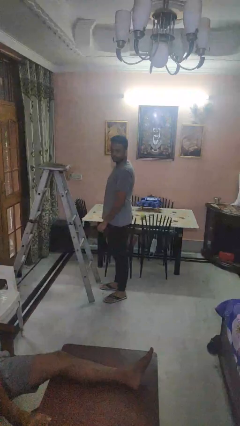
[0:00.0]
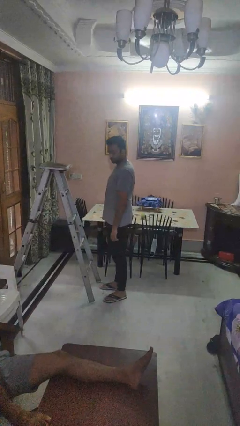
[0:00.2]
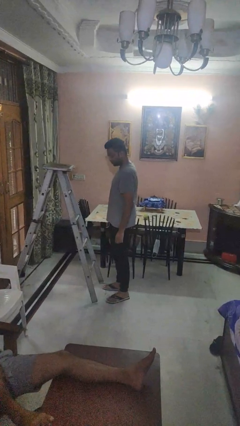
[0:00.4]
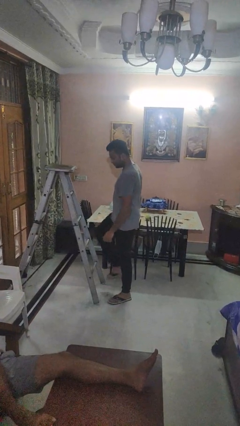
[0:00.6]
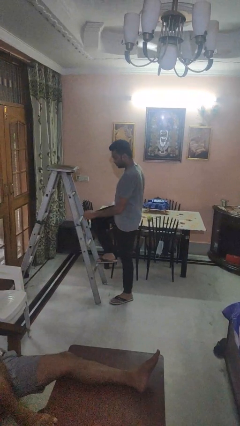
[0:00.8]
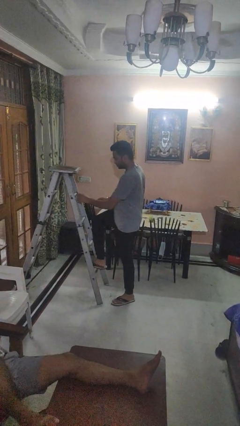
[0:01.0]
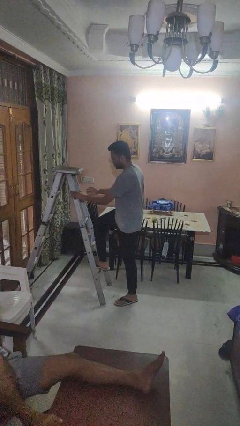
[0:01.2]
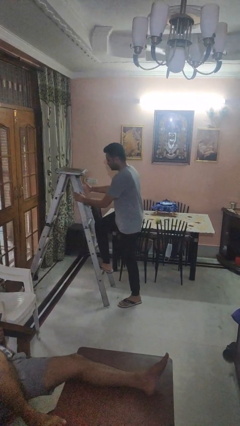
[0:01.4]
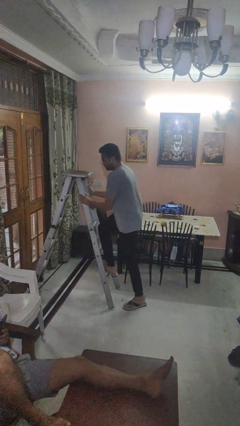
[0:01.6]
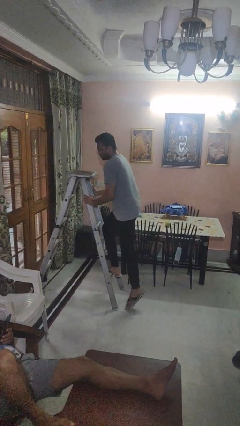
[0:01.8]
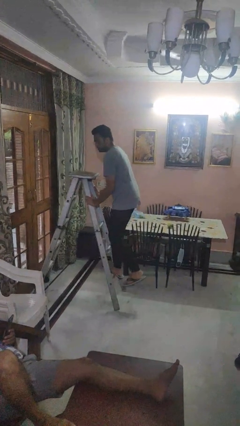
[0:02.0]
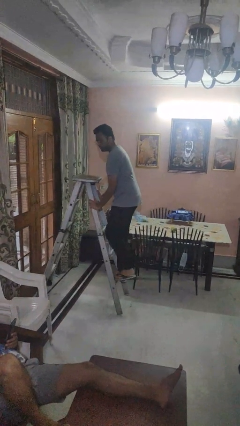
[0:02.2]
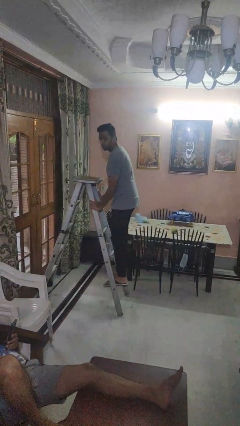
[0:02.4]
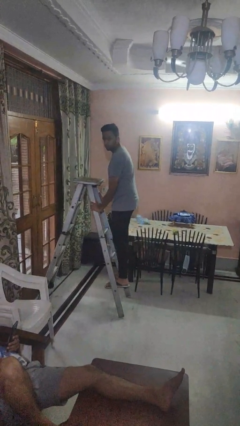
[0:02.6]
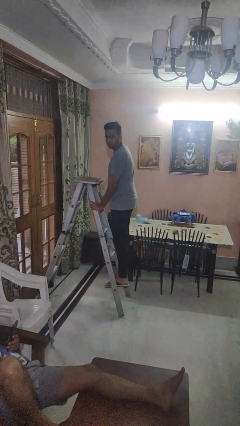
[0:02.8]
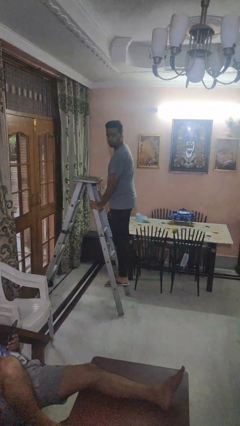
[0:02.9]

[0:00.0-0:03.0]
person climbs up ladder

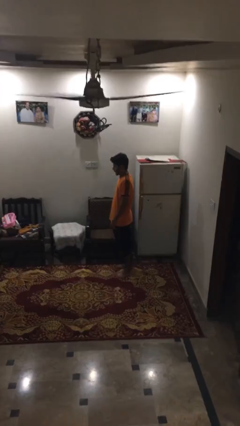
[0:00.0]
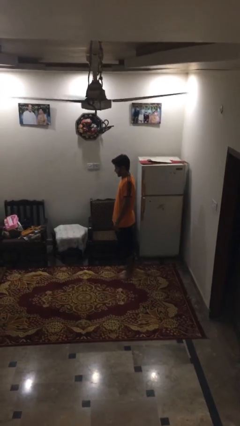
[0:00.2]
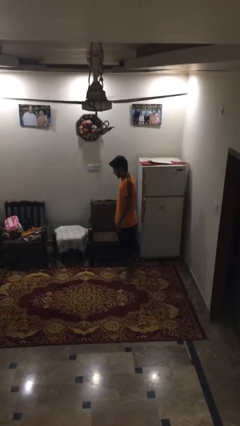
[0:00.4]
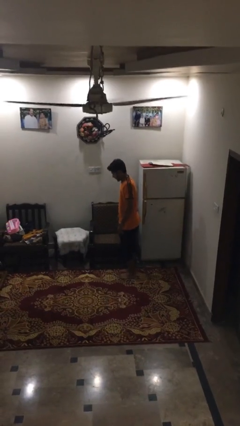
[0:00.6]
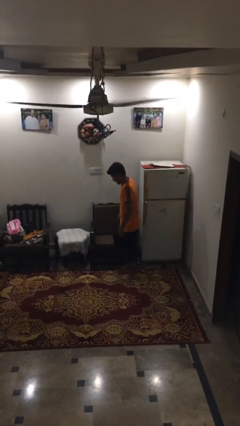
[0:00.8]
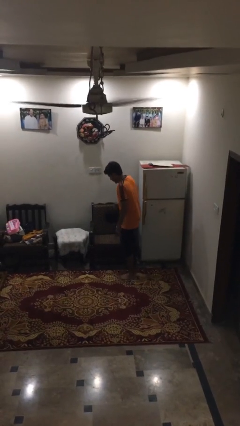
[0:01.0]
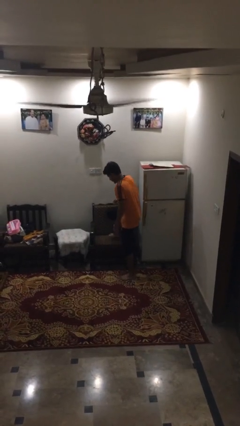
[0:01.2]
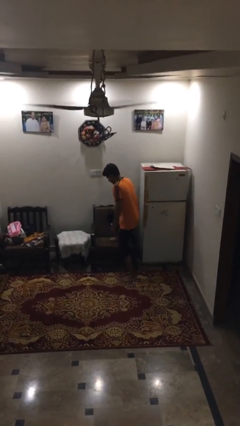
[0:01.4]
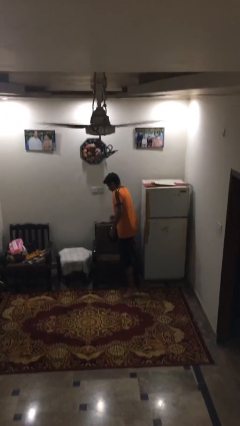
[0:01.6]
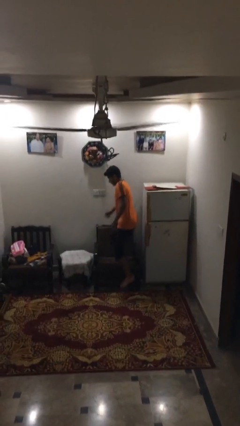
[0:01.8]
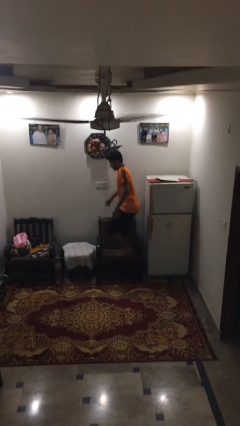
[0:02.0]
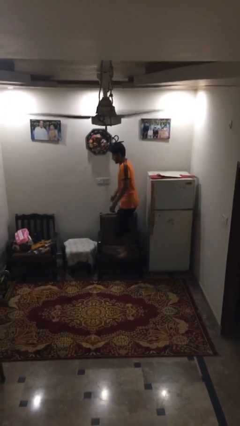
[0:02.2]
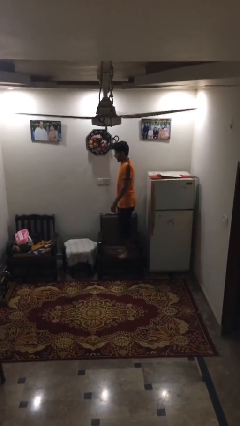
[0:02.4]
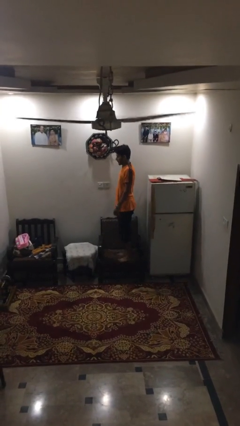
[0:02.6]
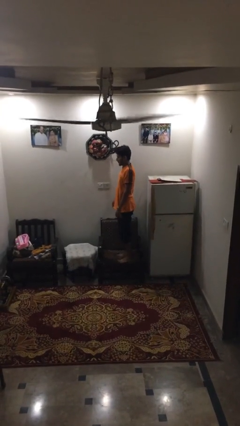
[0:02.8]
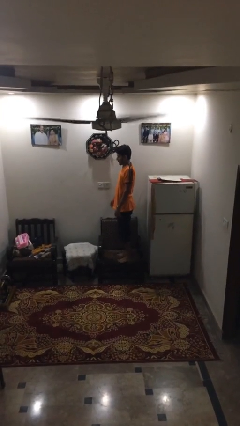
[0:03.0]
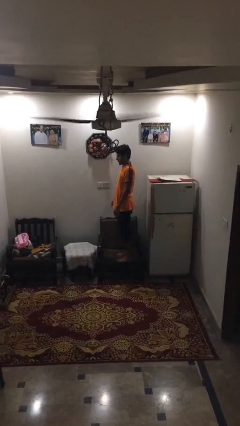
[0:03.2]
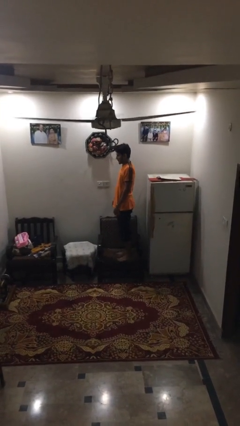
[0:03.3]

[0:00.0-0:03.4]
person climbs on couch

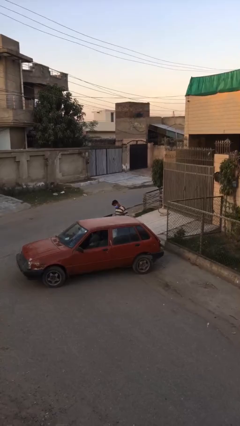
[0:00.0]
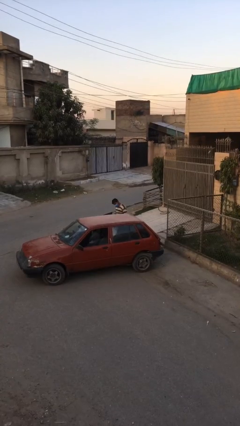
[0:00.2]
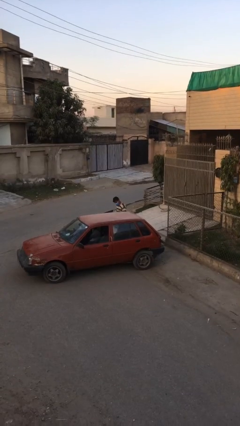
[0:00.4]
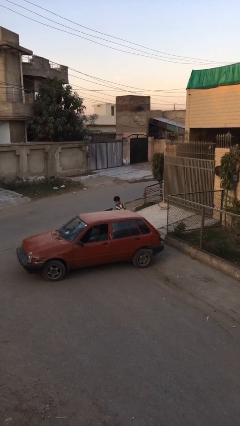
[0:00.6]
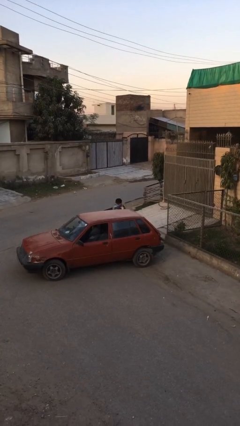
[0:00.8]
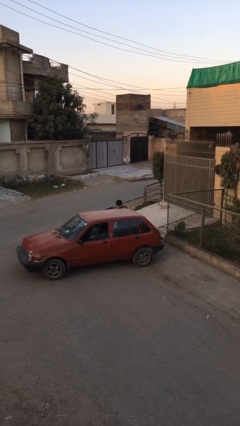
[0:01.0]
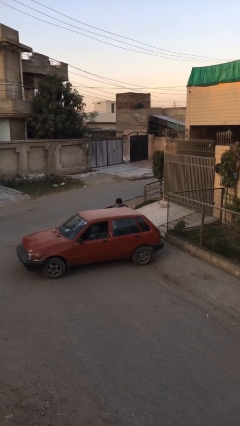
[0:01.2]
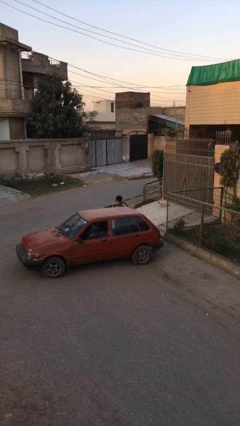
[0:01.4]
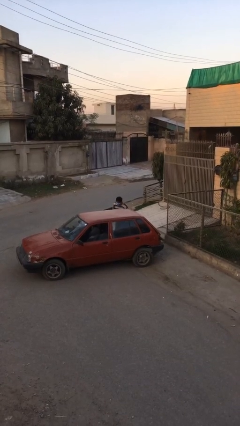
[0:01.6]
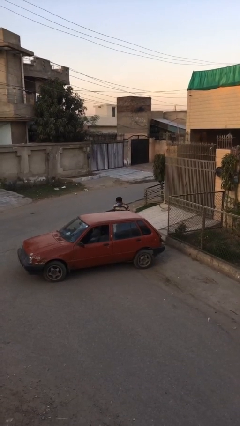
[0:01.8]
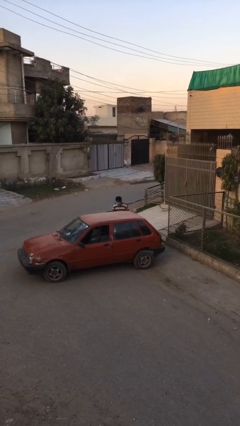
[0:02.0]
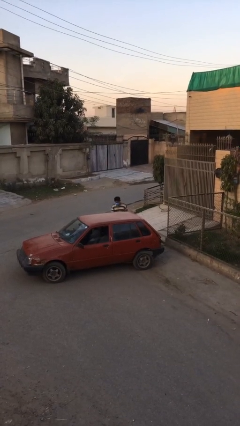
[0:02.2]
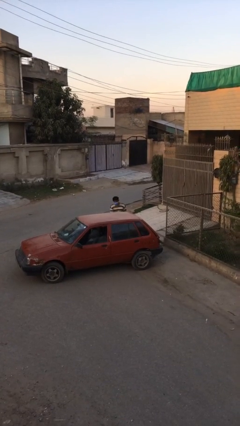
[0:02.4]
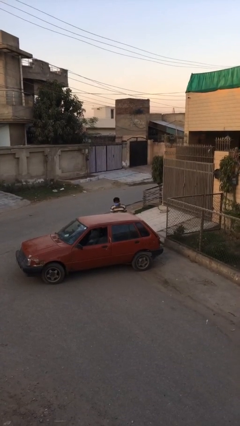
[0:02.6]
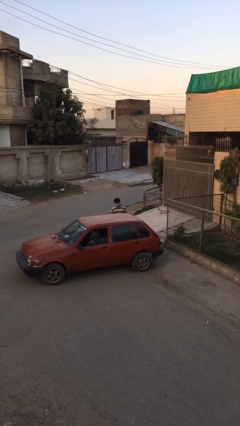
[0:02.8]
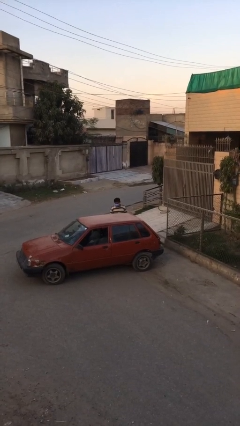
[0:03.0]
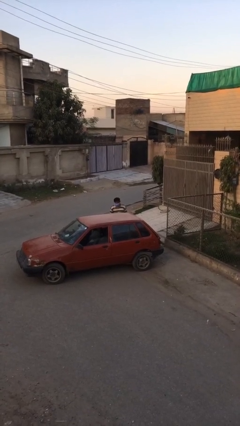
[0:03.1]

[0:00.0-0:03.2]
person loads car

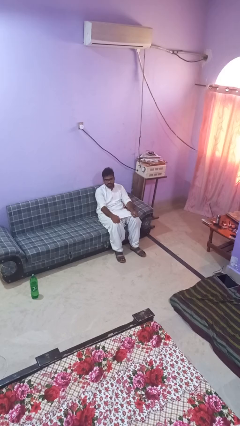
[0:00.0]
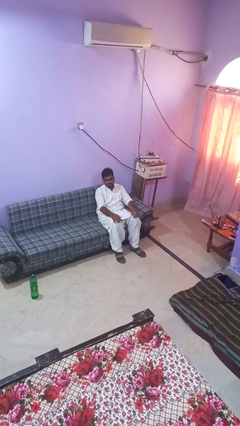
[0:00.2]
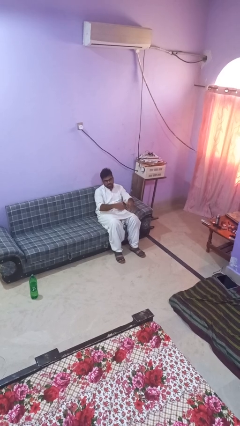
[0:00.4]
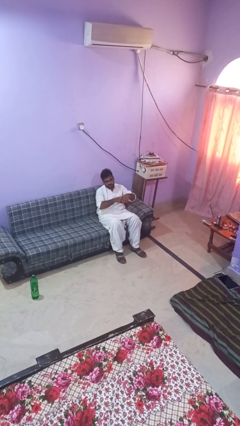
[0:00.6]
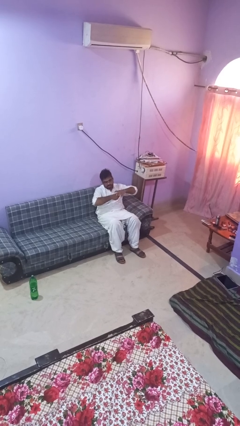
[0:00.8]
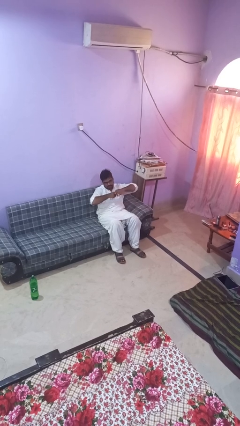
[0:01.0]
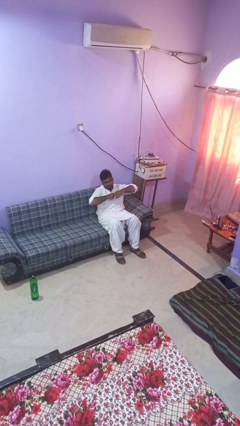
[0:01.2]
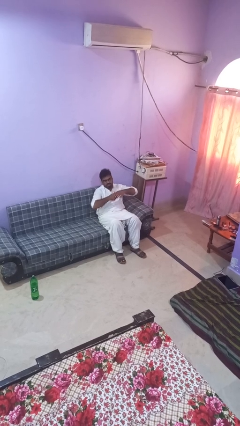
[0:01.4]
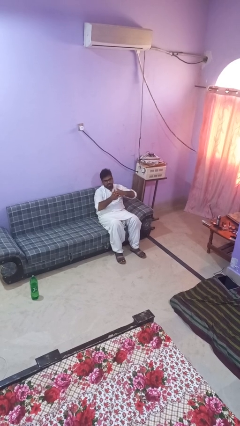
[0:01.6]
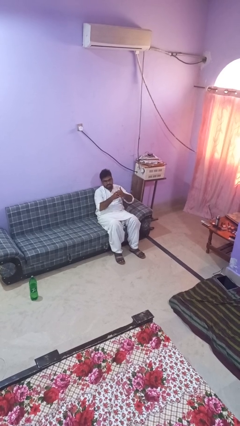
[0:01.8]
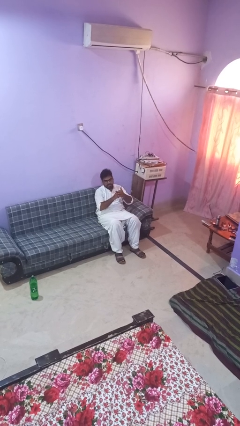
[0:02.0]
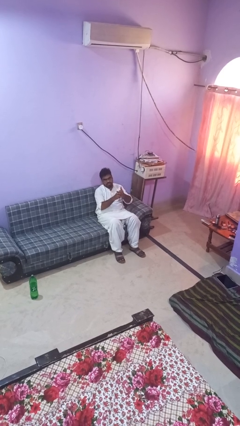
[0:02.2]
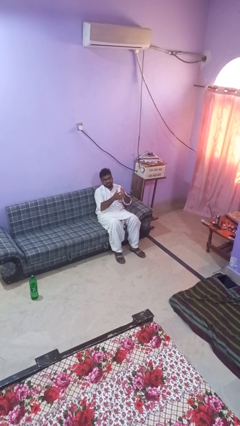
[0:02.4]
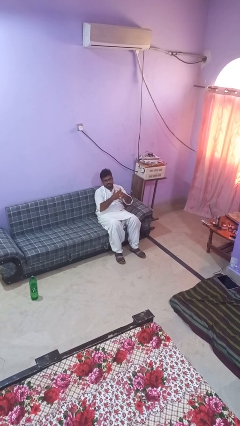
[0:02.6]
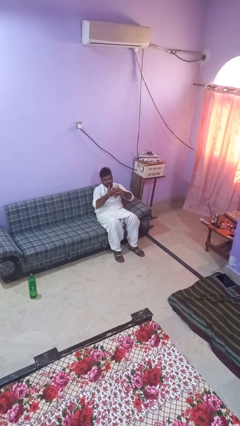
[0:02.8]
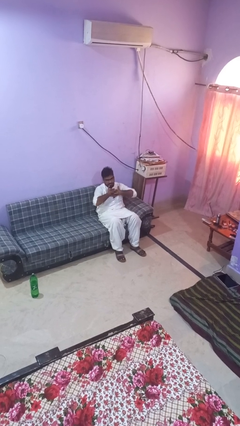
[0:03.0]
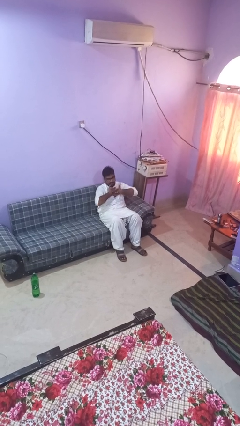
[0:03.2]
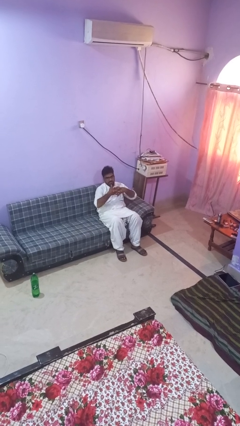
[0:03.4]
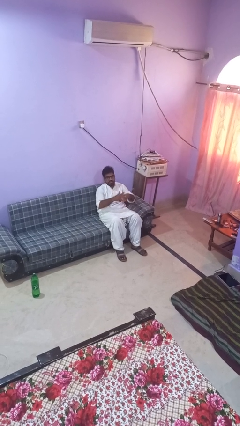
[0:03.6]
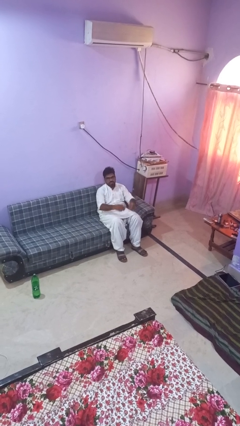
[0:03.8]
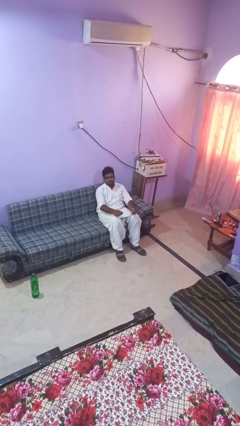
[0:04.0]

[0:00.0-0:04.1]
person cracks knuckles

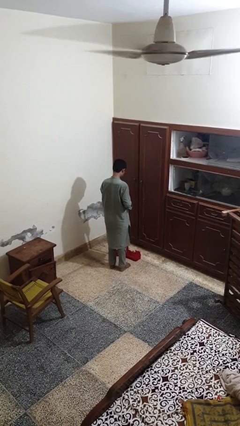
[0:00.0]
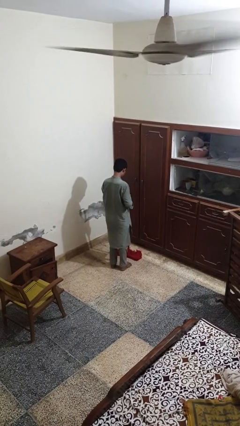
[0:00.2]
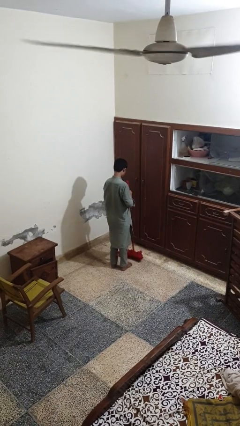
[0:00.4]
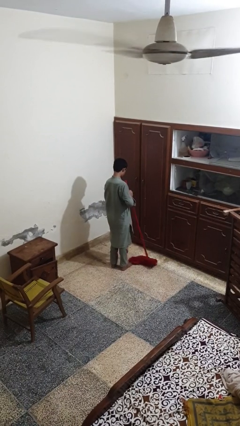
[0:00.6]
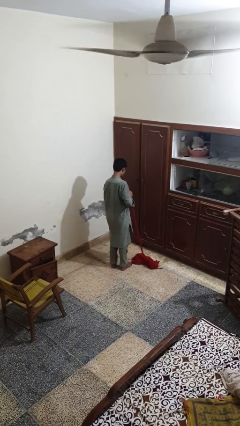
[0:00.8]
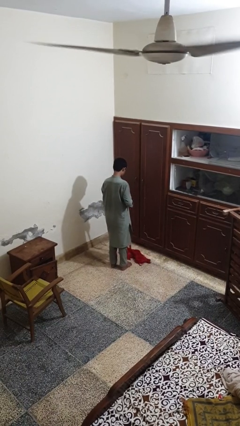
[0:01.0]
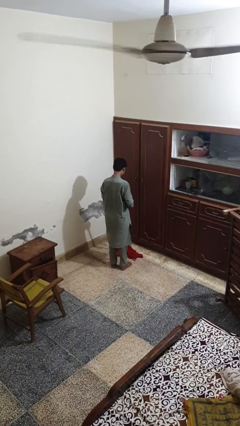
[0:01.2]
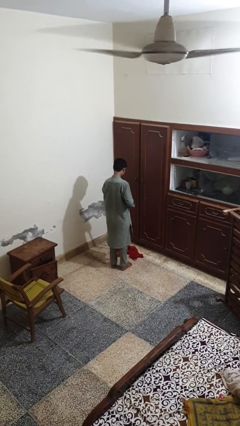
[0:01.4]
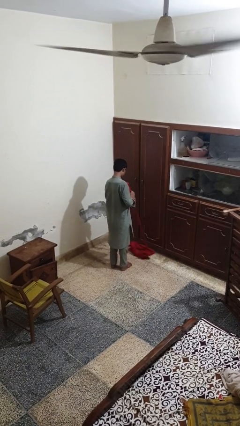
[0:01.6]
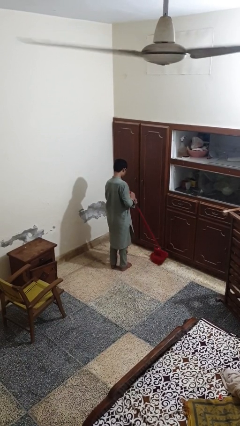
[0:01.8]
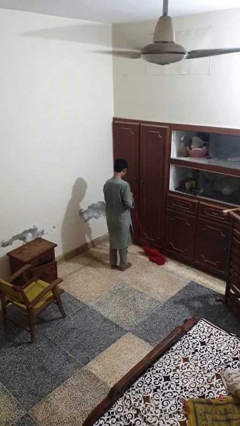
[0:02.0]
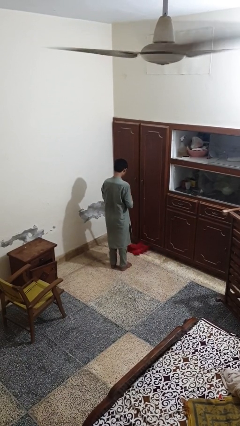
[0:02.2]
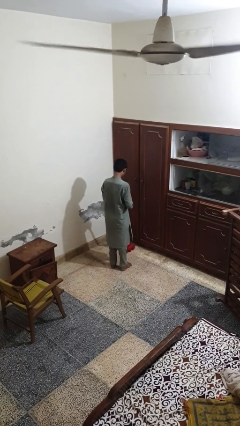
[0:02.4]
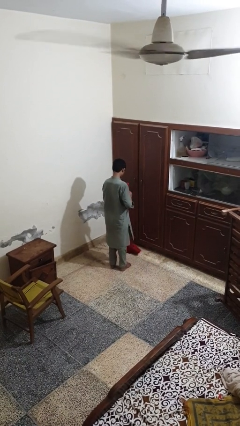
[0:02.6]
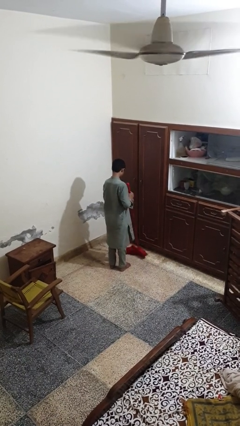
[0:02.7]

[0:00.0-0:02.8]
person mops

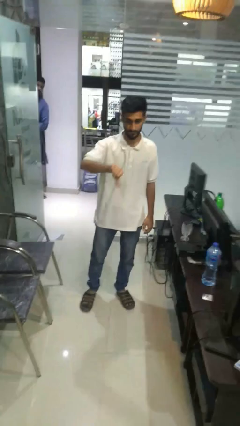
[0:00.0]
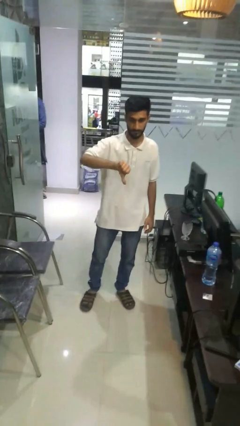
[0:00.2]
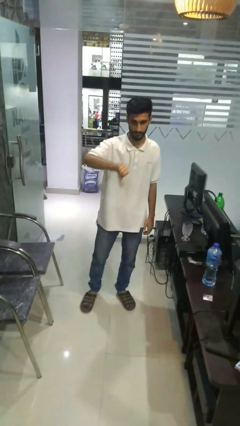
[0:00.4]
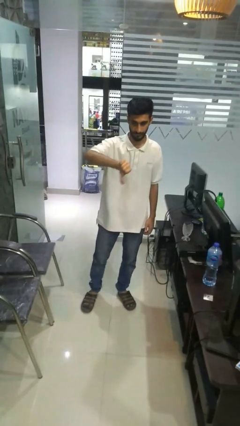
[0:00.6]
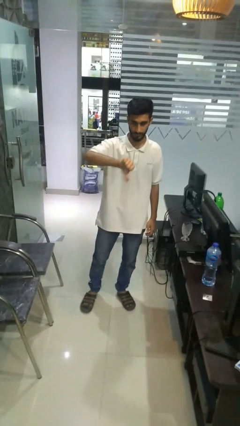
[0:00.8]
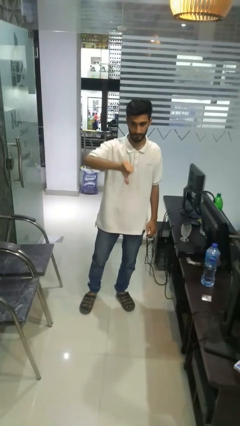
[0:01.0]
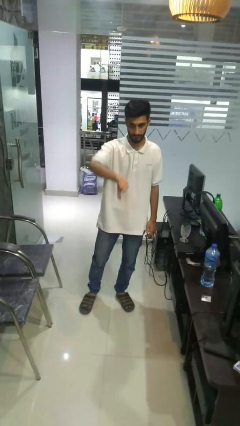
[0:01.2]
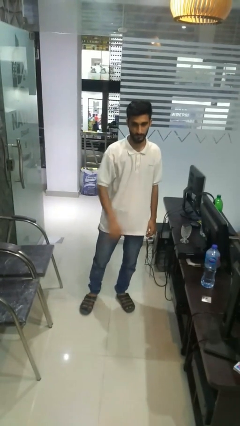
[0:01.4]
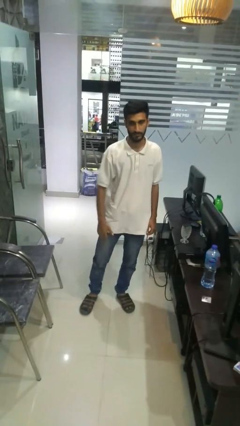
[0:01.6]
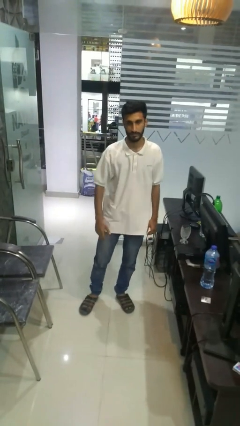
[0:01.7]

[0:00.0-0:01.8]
person gestures thumbs down
